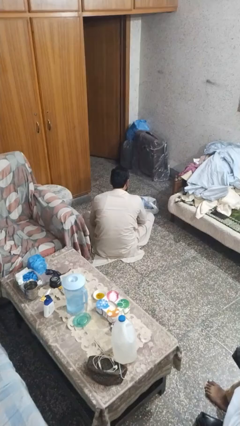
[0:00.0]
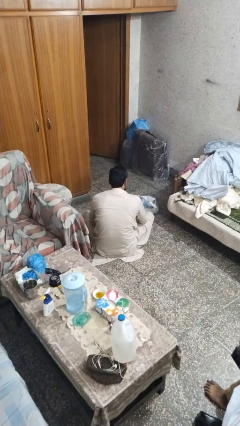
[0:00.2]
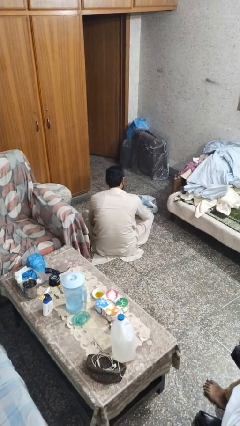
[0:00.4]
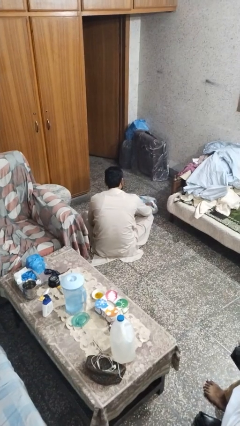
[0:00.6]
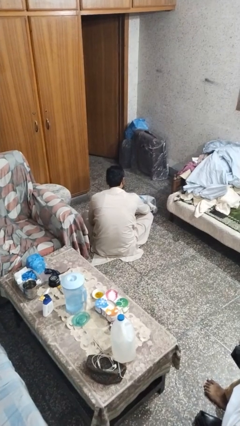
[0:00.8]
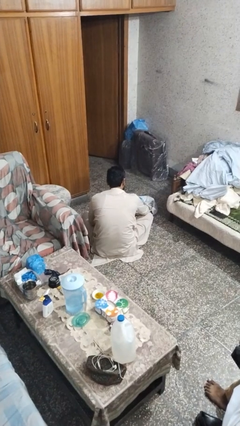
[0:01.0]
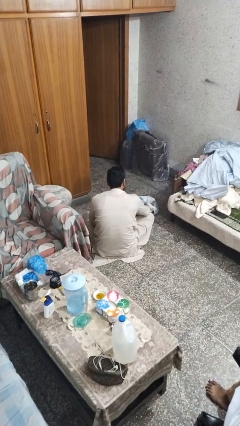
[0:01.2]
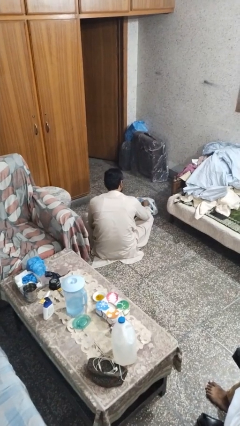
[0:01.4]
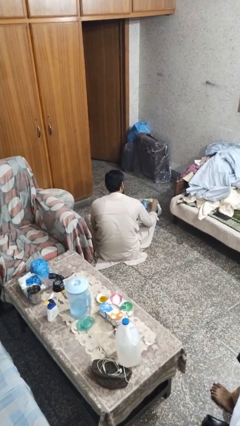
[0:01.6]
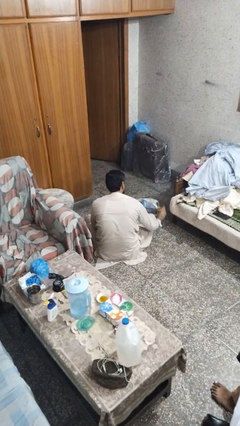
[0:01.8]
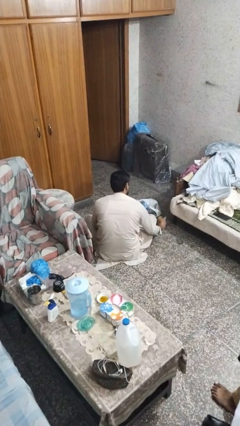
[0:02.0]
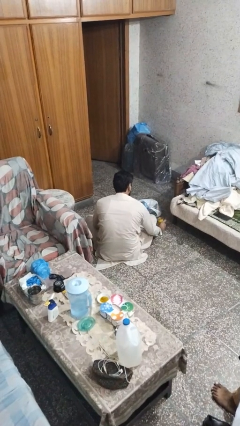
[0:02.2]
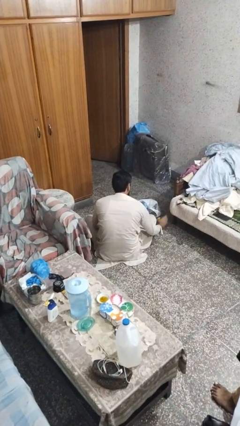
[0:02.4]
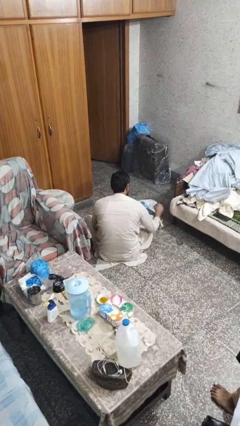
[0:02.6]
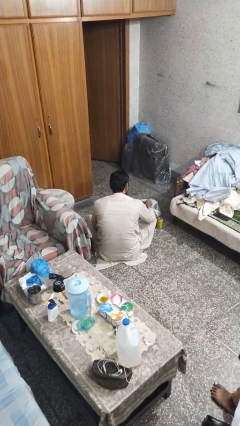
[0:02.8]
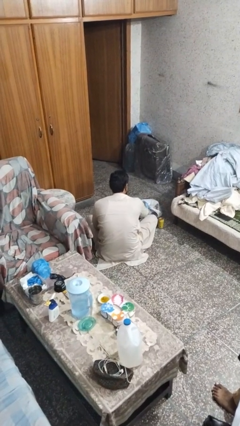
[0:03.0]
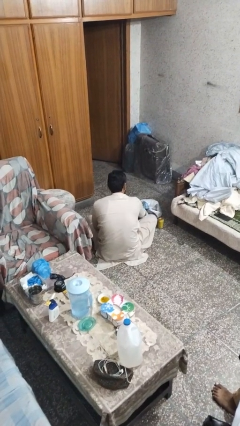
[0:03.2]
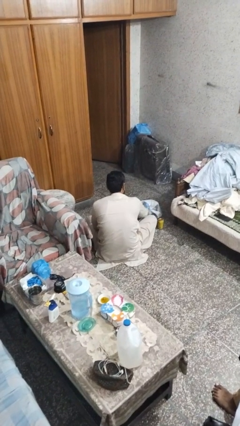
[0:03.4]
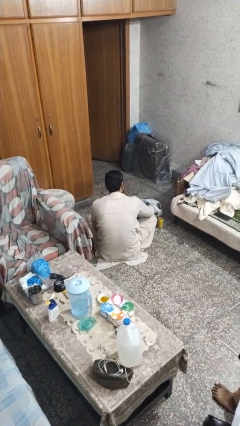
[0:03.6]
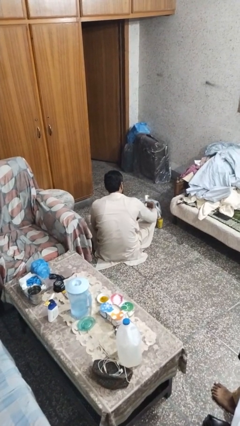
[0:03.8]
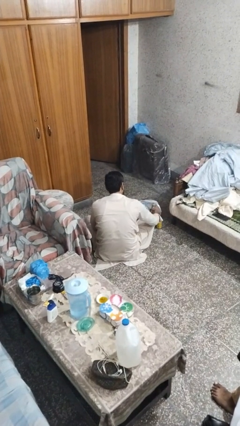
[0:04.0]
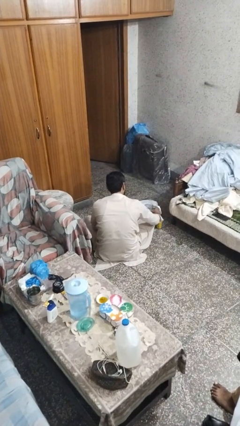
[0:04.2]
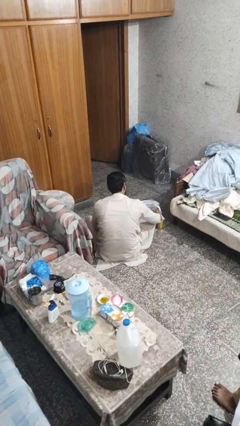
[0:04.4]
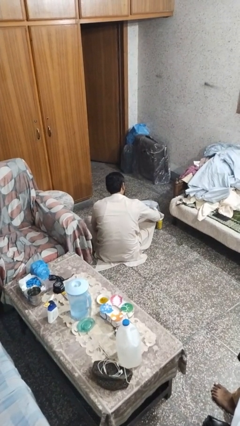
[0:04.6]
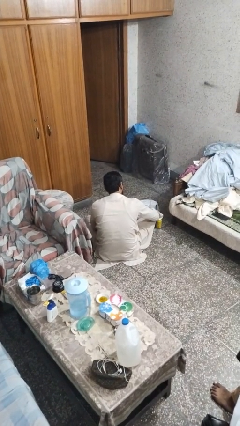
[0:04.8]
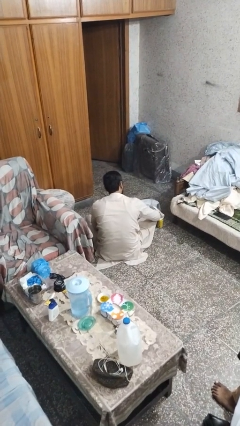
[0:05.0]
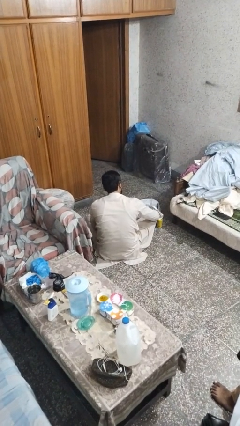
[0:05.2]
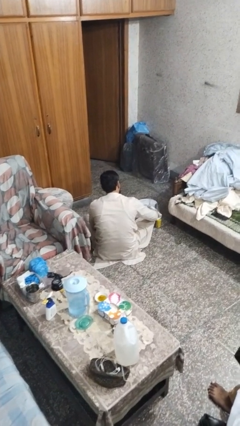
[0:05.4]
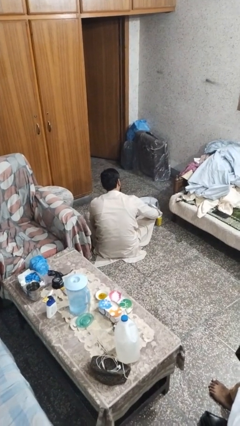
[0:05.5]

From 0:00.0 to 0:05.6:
person takes object from bag

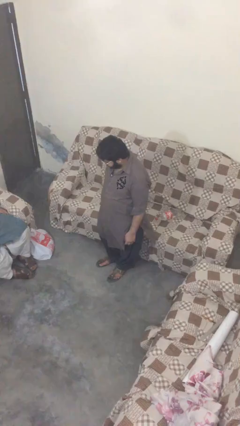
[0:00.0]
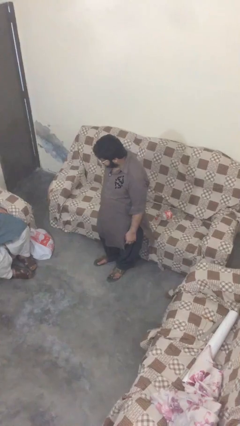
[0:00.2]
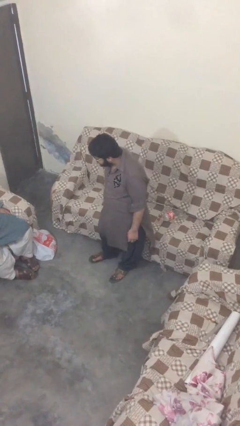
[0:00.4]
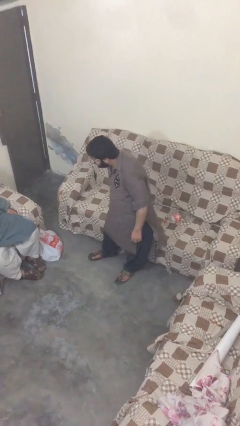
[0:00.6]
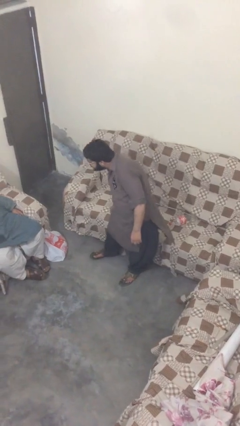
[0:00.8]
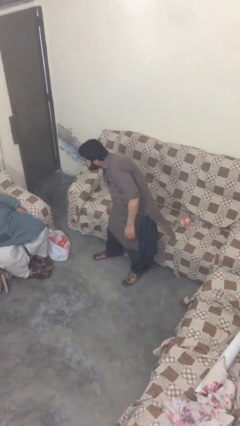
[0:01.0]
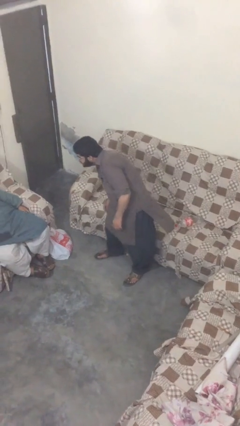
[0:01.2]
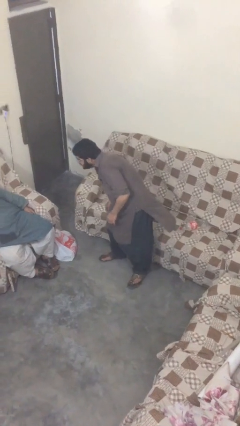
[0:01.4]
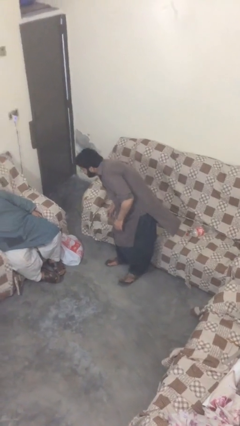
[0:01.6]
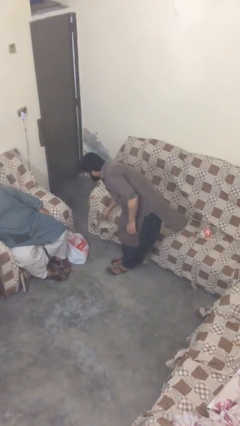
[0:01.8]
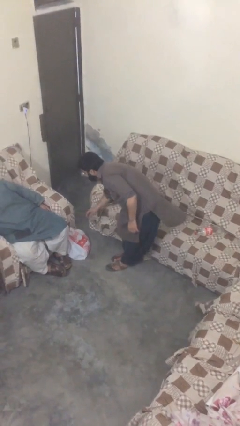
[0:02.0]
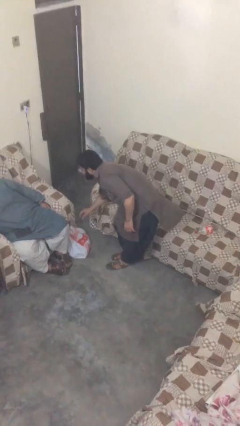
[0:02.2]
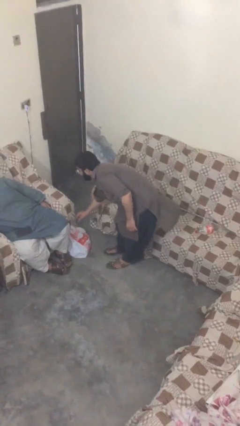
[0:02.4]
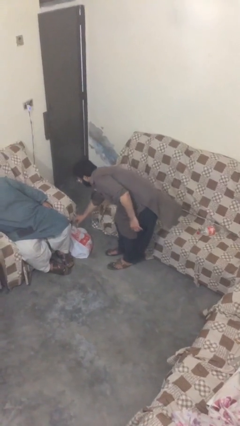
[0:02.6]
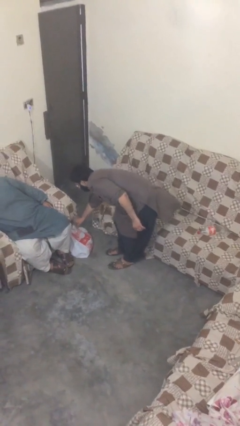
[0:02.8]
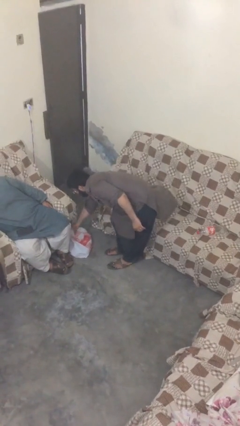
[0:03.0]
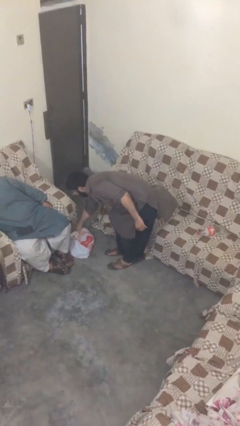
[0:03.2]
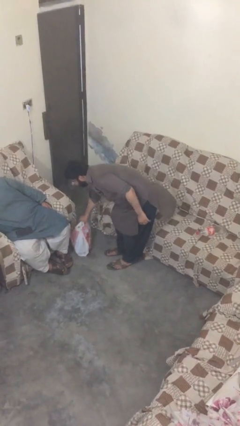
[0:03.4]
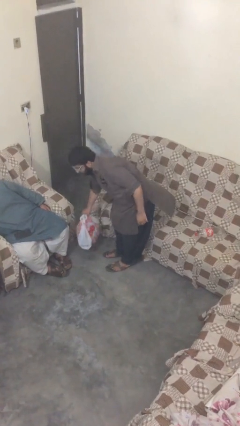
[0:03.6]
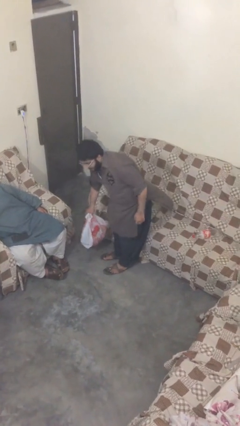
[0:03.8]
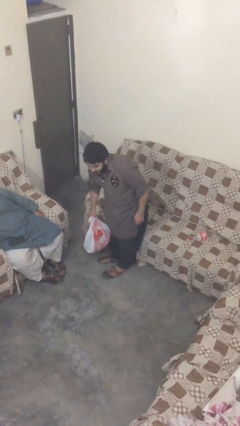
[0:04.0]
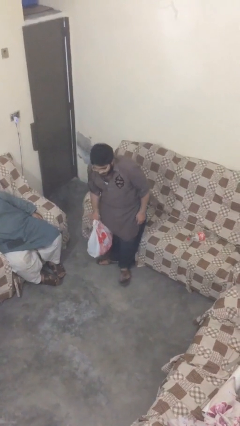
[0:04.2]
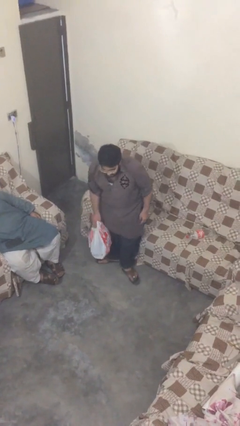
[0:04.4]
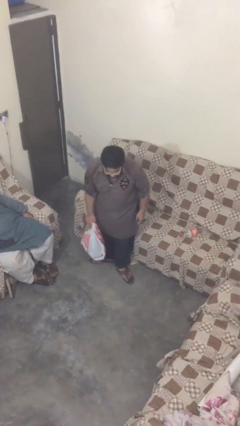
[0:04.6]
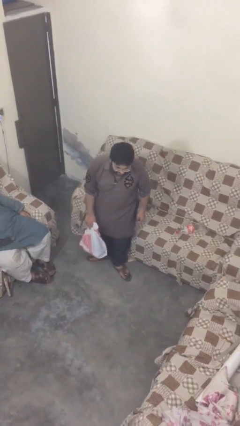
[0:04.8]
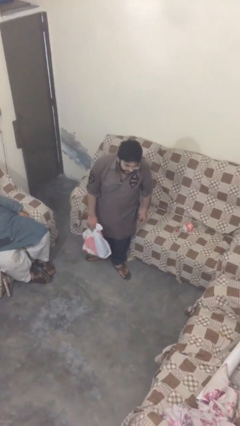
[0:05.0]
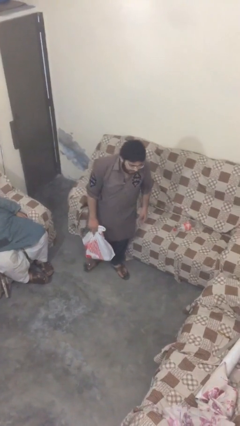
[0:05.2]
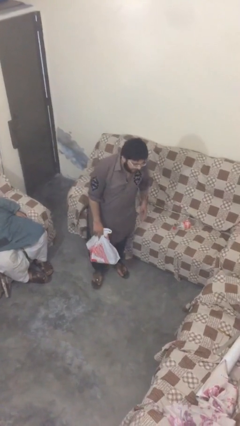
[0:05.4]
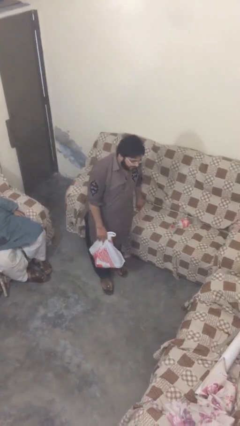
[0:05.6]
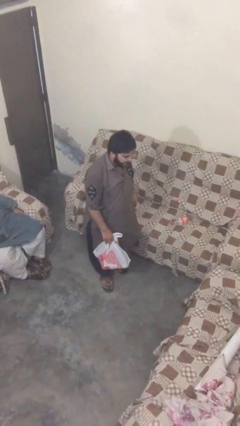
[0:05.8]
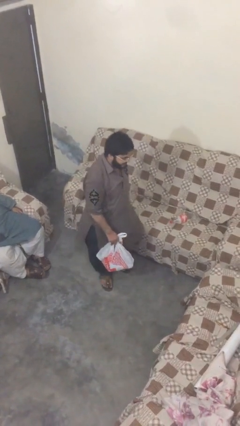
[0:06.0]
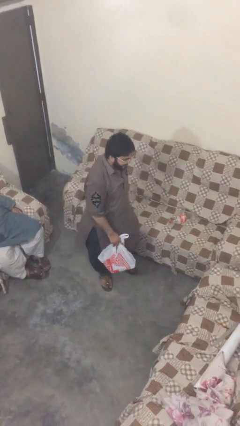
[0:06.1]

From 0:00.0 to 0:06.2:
person steals object from person

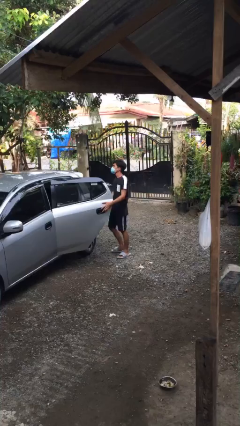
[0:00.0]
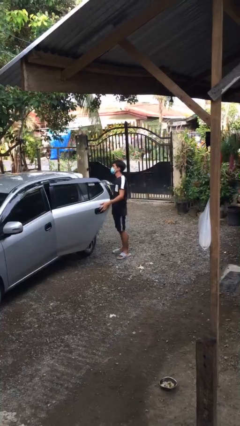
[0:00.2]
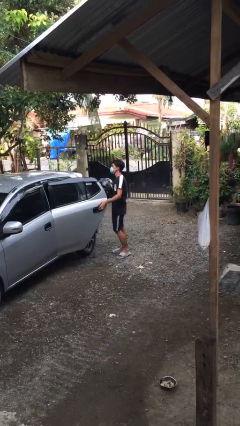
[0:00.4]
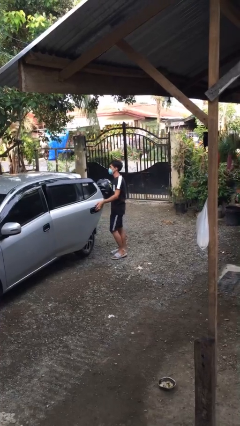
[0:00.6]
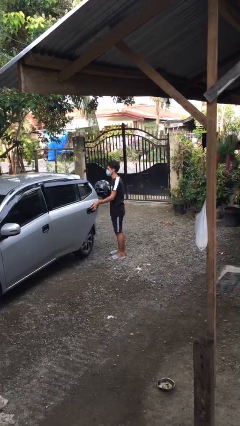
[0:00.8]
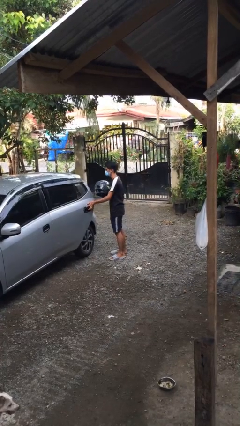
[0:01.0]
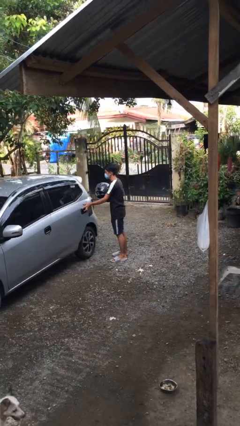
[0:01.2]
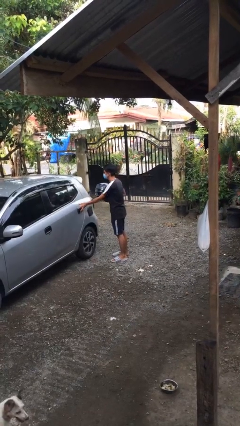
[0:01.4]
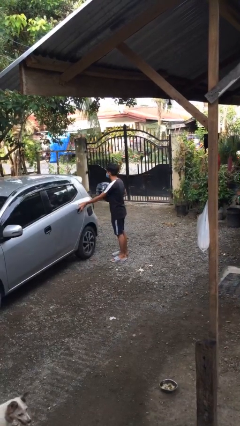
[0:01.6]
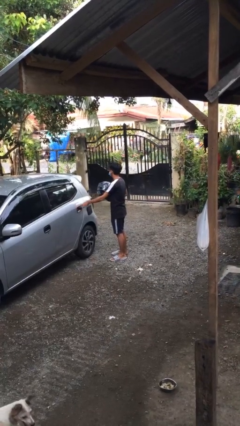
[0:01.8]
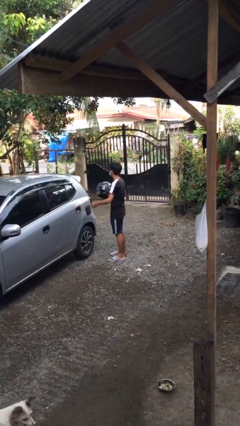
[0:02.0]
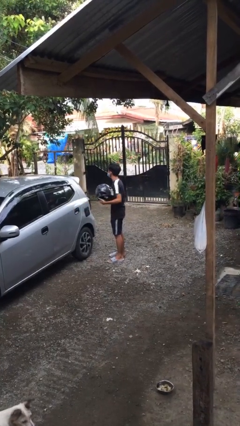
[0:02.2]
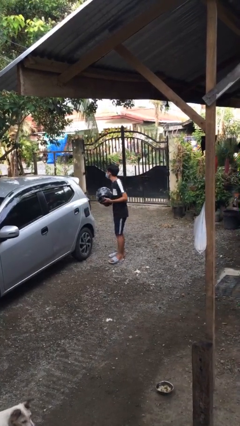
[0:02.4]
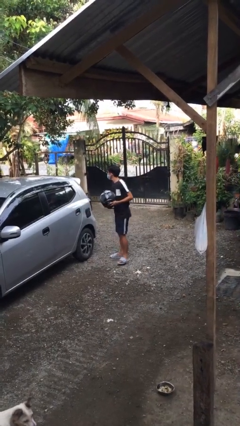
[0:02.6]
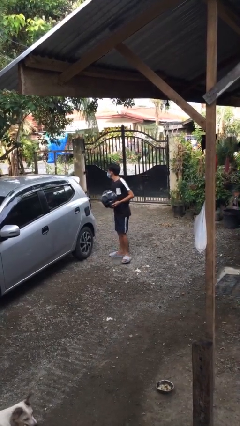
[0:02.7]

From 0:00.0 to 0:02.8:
person closes car door

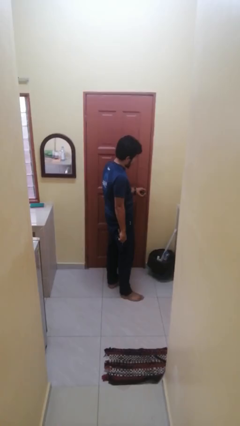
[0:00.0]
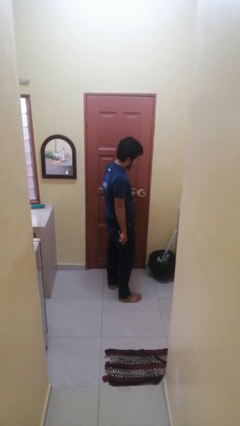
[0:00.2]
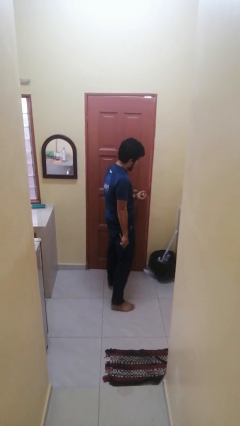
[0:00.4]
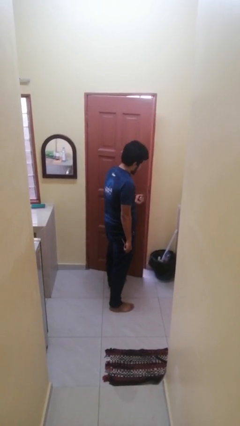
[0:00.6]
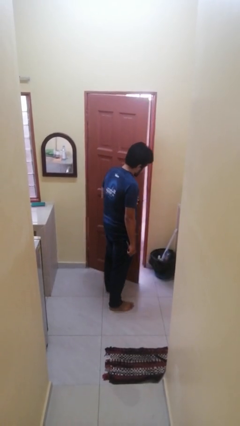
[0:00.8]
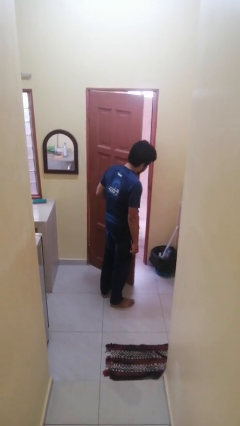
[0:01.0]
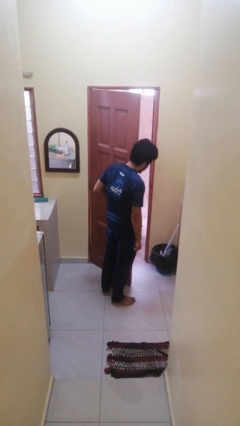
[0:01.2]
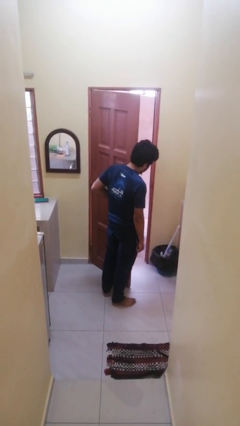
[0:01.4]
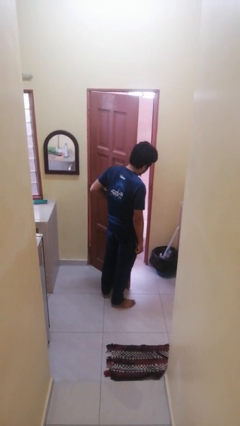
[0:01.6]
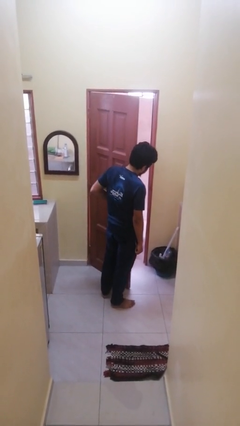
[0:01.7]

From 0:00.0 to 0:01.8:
person opens facility door

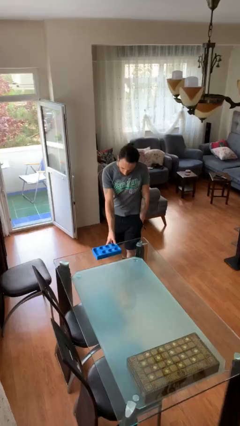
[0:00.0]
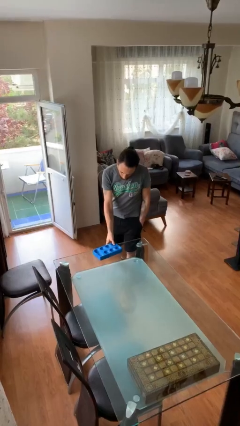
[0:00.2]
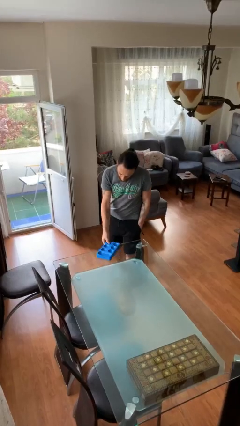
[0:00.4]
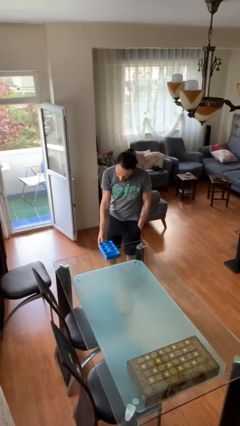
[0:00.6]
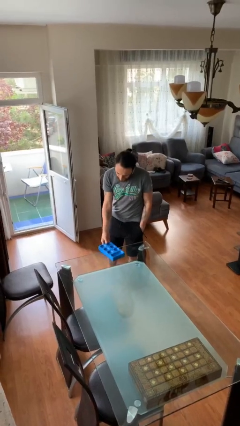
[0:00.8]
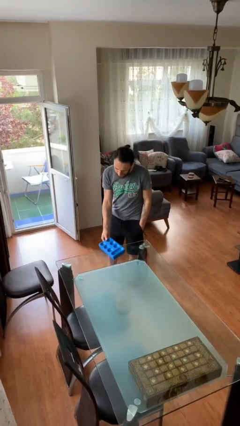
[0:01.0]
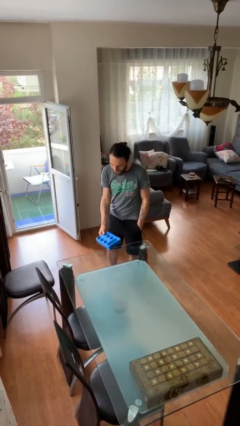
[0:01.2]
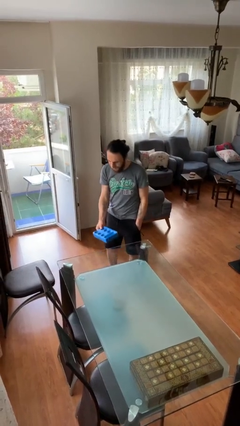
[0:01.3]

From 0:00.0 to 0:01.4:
person picks up object from table
